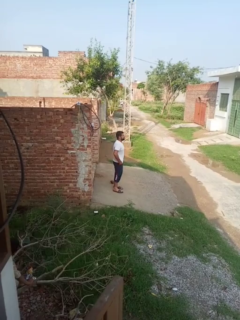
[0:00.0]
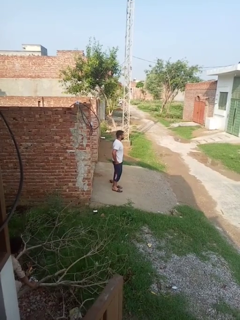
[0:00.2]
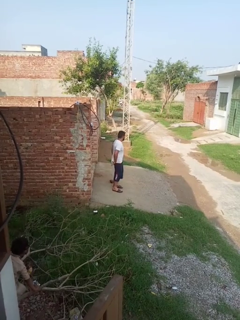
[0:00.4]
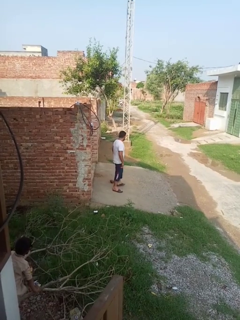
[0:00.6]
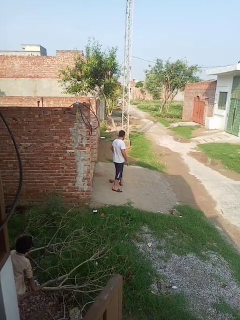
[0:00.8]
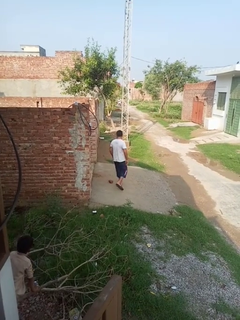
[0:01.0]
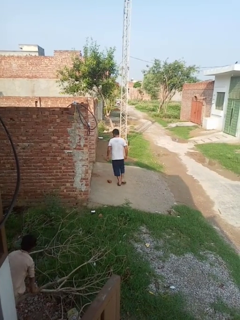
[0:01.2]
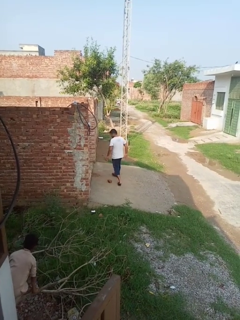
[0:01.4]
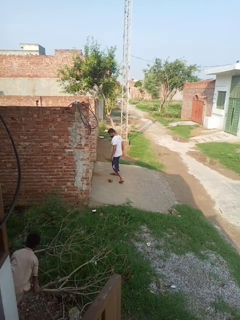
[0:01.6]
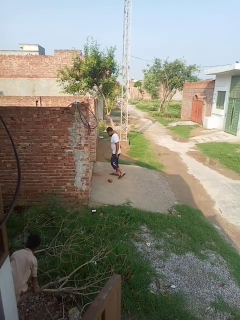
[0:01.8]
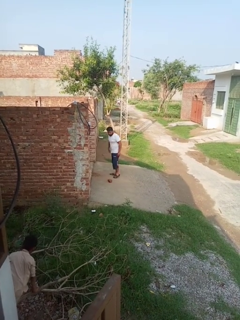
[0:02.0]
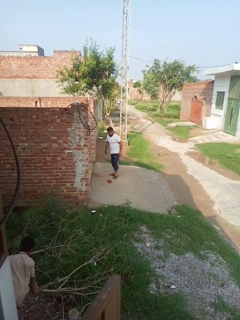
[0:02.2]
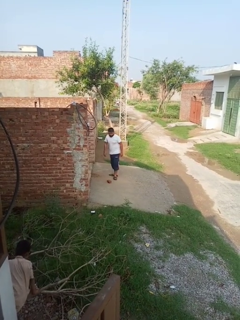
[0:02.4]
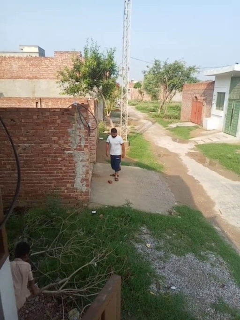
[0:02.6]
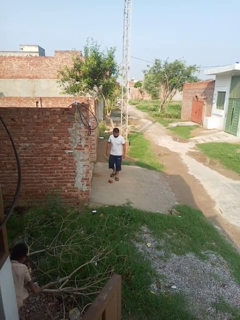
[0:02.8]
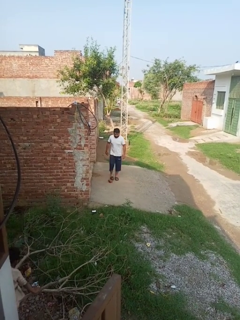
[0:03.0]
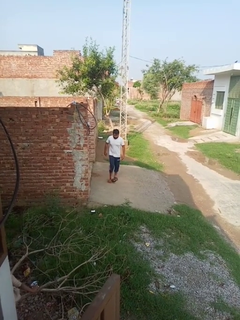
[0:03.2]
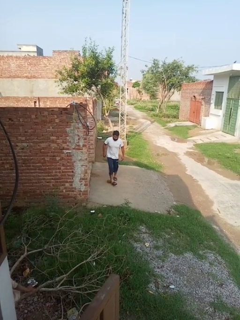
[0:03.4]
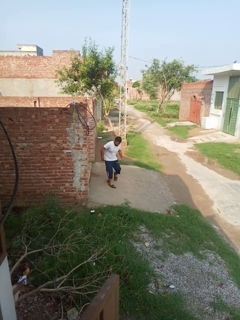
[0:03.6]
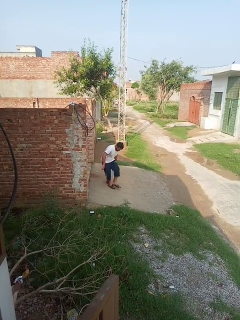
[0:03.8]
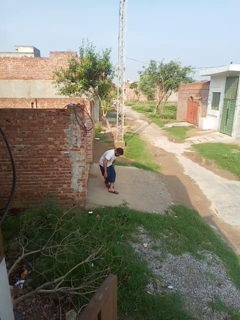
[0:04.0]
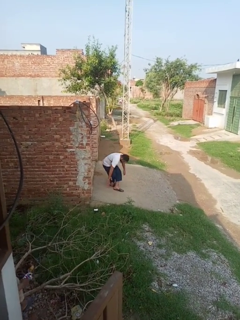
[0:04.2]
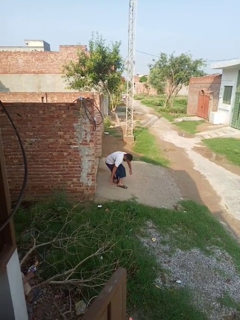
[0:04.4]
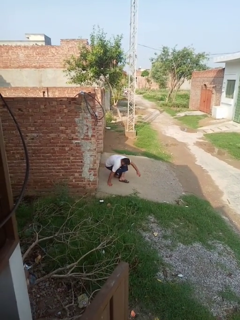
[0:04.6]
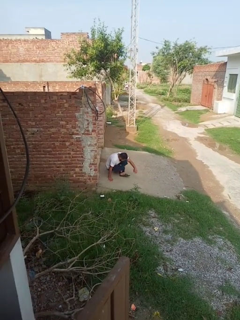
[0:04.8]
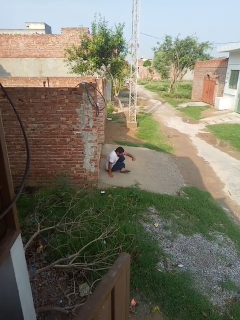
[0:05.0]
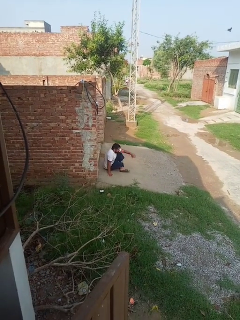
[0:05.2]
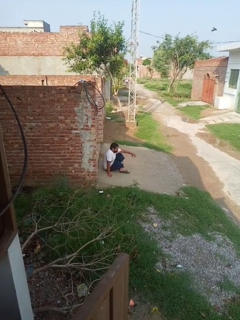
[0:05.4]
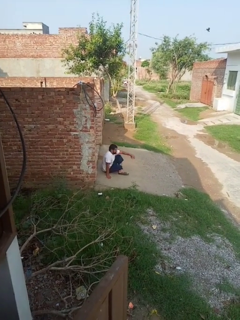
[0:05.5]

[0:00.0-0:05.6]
person trips on object on floor

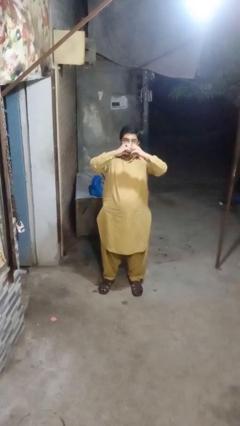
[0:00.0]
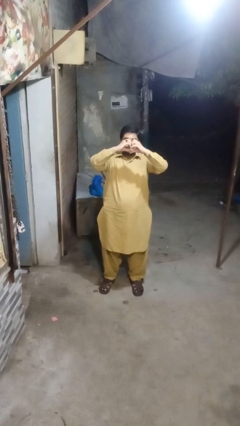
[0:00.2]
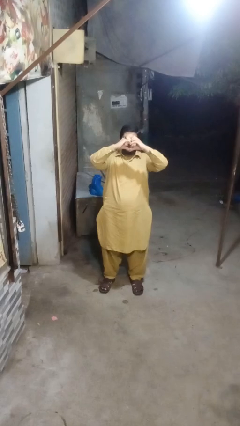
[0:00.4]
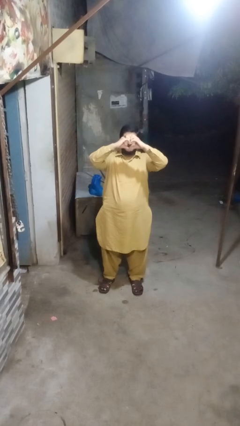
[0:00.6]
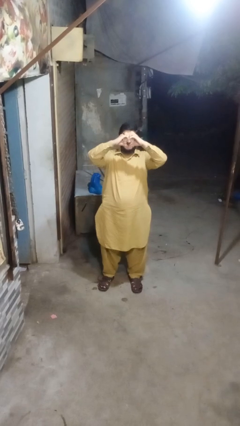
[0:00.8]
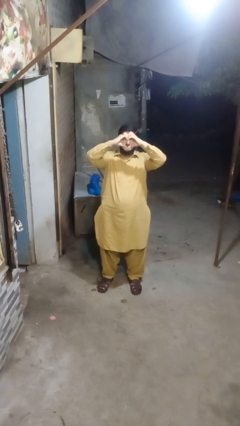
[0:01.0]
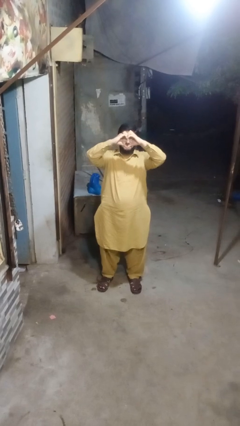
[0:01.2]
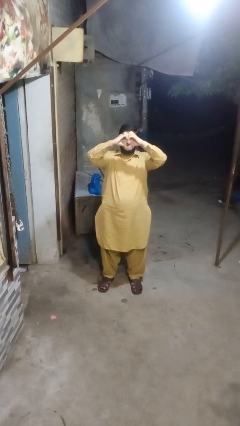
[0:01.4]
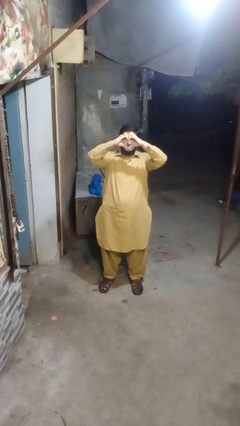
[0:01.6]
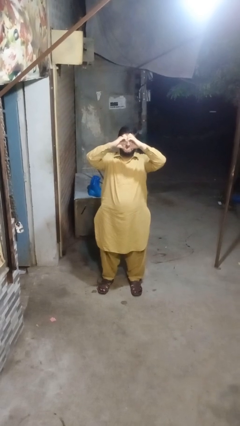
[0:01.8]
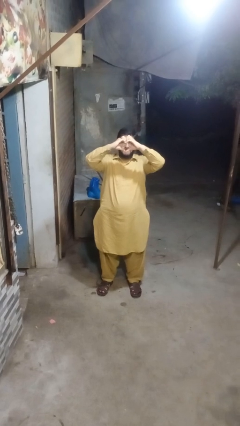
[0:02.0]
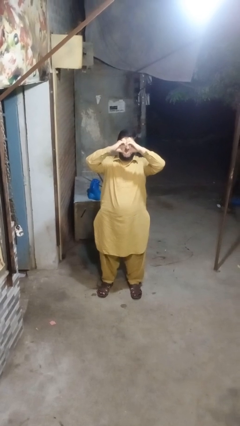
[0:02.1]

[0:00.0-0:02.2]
person gestures heart

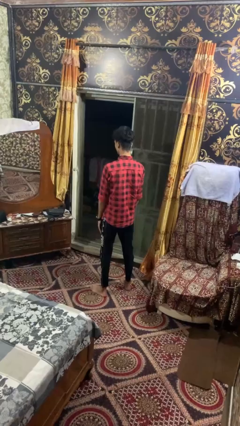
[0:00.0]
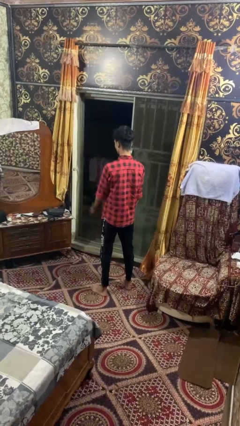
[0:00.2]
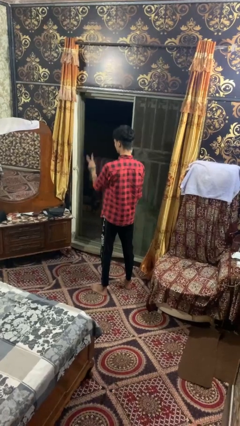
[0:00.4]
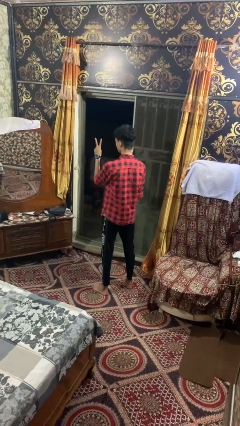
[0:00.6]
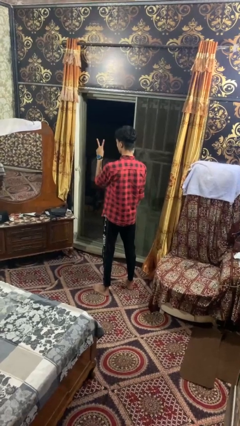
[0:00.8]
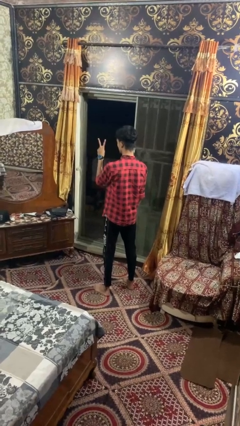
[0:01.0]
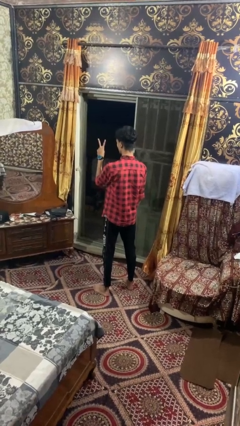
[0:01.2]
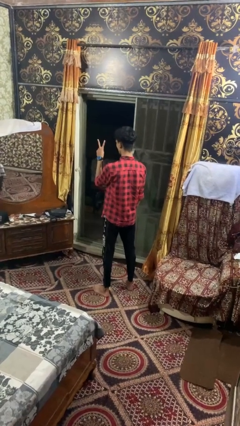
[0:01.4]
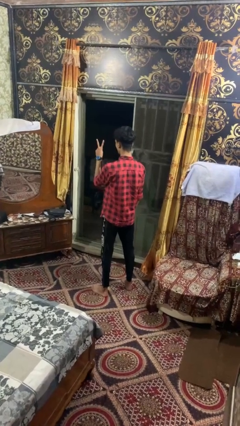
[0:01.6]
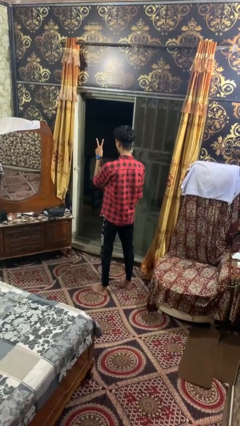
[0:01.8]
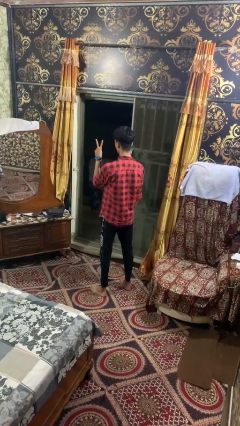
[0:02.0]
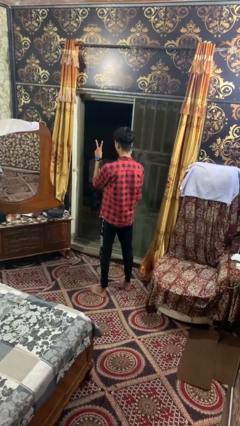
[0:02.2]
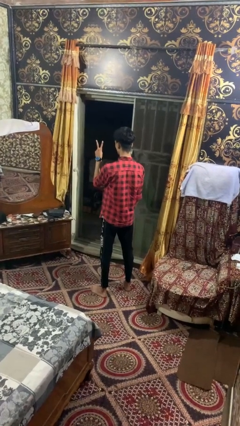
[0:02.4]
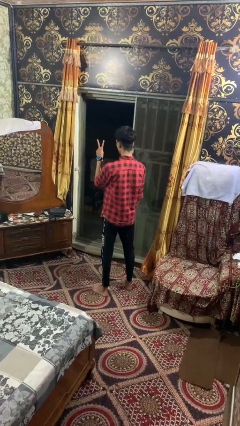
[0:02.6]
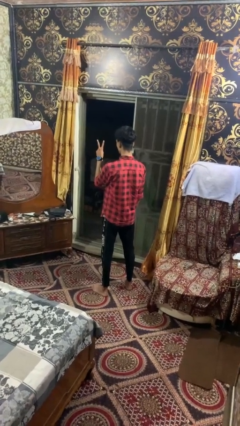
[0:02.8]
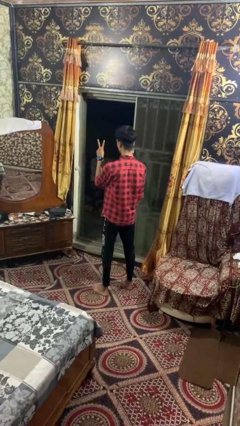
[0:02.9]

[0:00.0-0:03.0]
person gestures peace

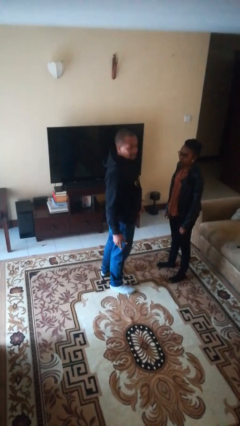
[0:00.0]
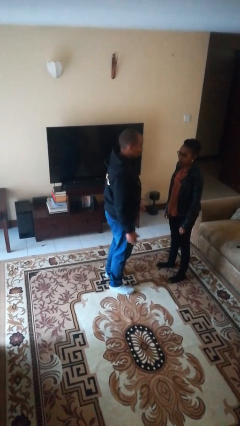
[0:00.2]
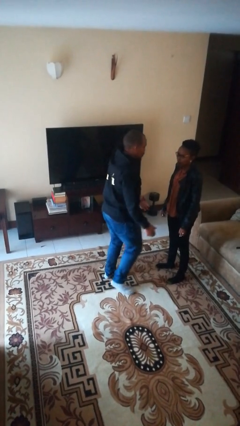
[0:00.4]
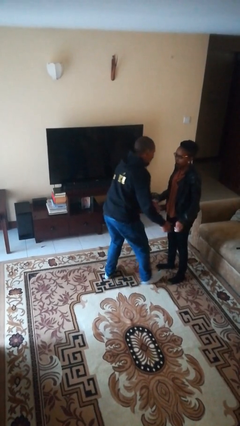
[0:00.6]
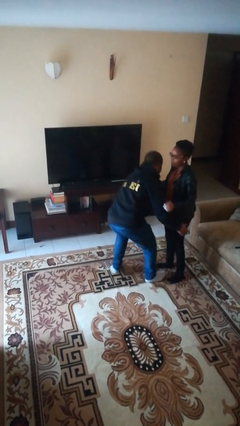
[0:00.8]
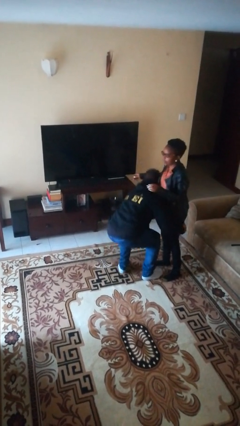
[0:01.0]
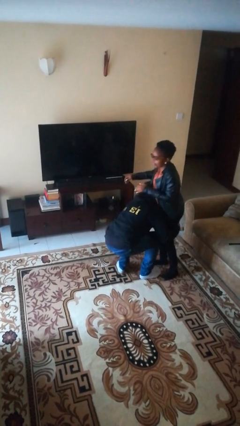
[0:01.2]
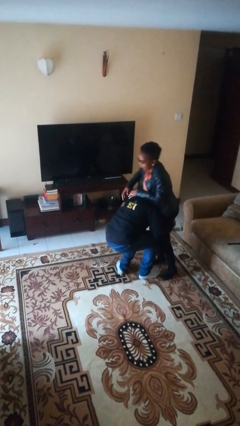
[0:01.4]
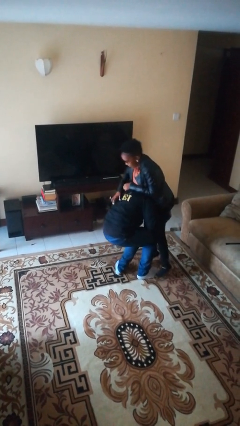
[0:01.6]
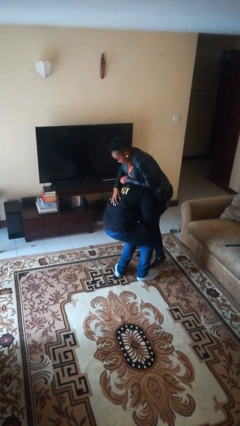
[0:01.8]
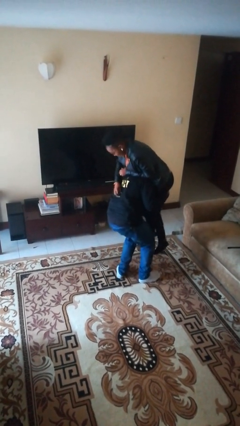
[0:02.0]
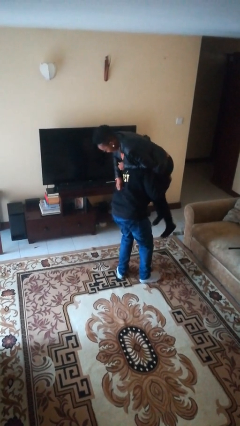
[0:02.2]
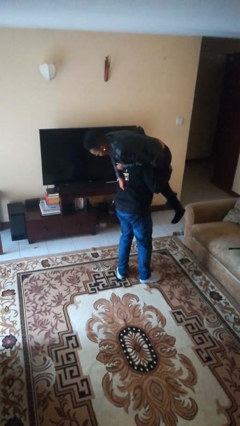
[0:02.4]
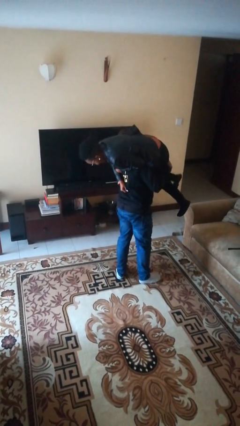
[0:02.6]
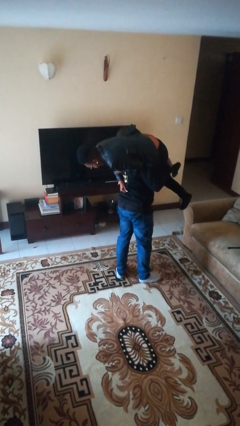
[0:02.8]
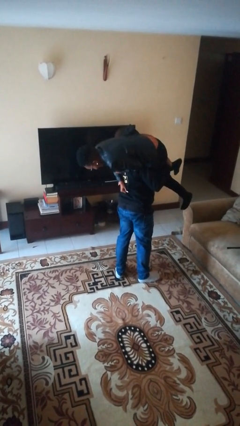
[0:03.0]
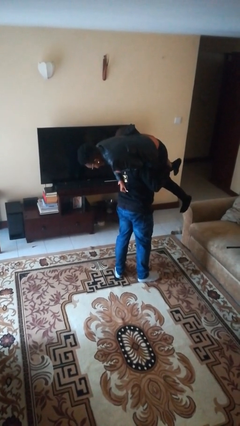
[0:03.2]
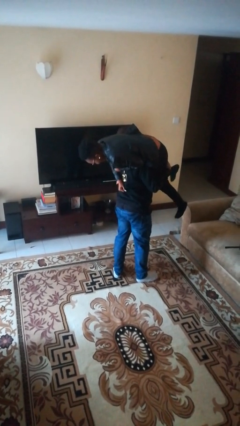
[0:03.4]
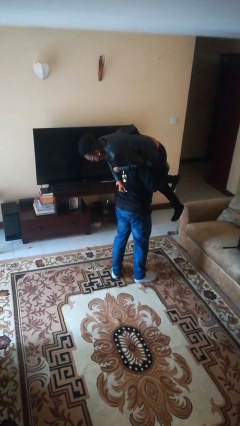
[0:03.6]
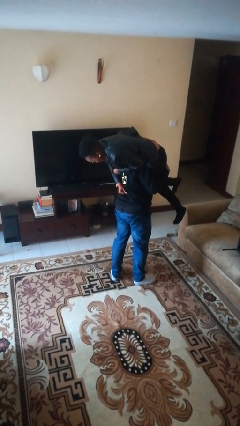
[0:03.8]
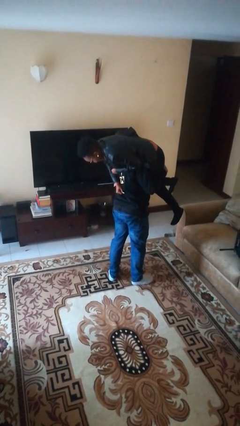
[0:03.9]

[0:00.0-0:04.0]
person carries person over shoulder

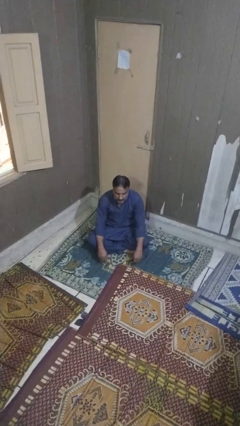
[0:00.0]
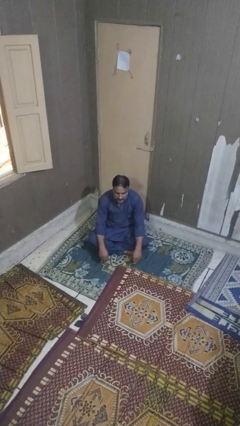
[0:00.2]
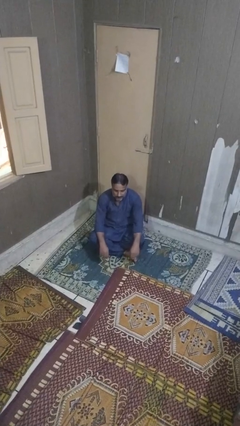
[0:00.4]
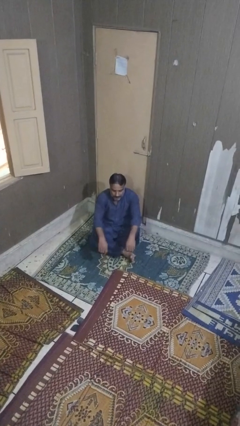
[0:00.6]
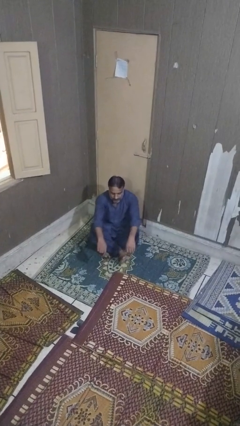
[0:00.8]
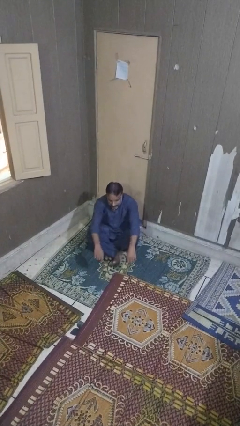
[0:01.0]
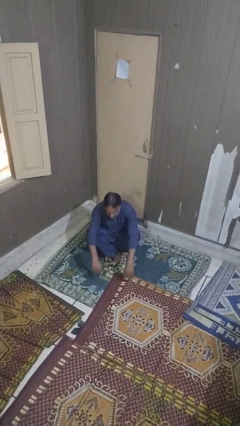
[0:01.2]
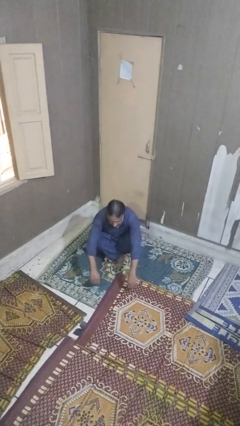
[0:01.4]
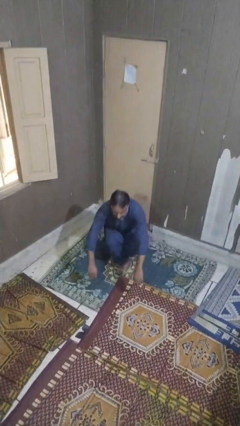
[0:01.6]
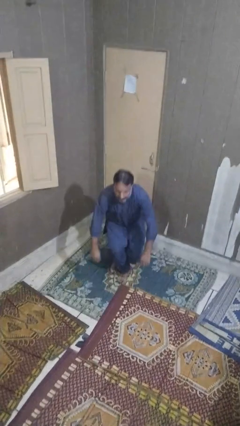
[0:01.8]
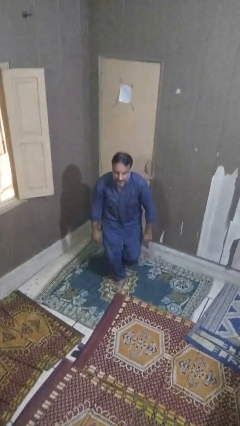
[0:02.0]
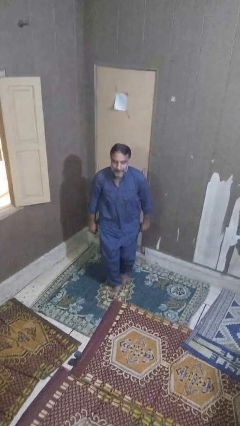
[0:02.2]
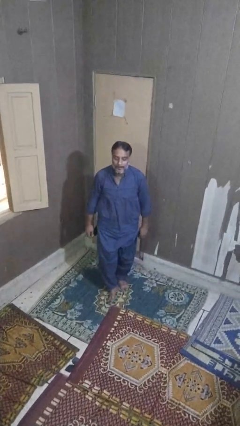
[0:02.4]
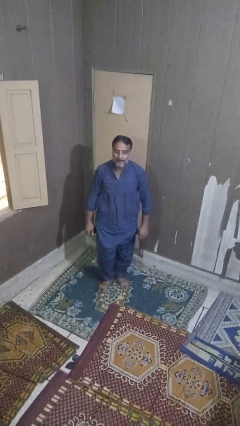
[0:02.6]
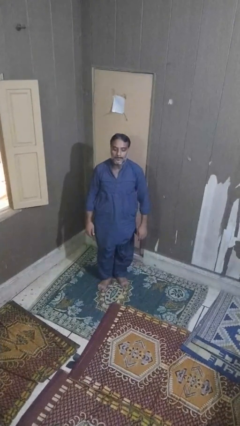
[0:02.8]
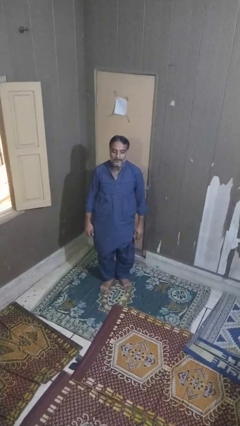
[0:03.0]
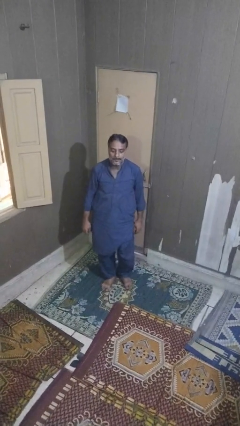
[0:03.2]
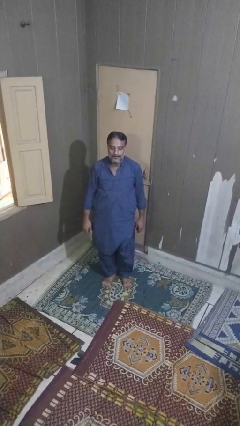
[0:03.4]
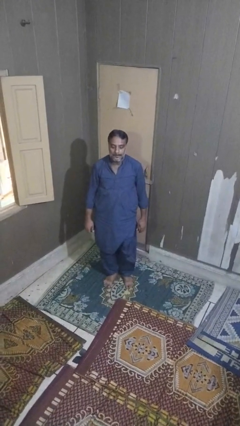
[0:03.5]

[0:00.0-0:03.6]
person stands up from floor
